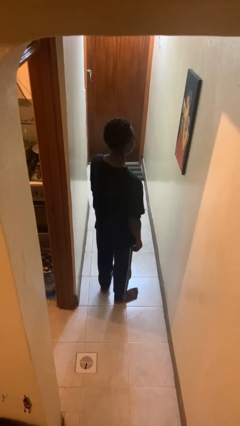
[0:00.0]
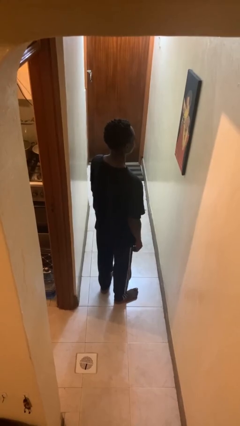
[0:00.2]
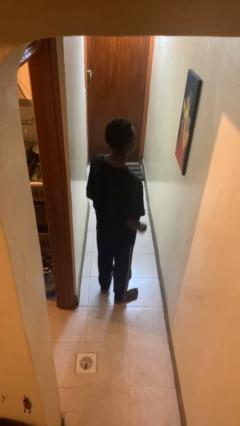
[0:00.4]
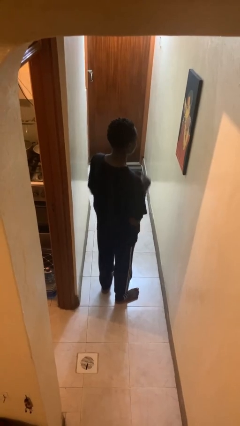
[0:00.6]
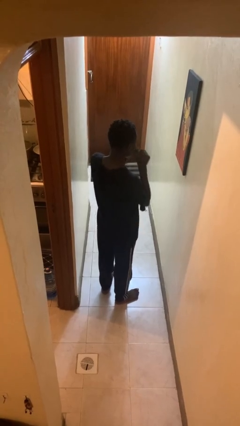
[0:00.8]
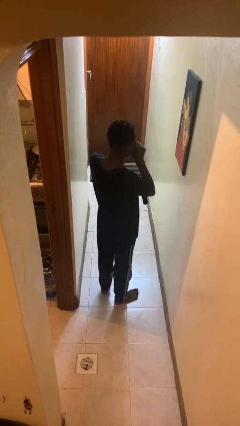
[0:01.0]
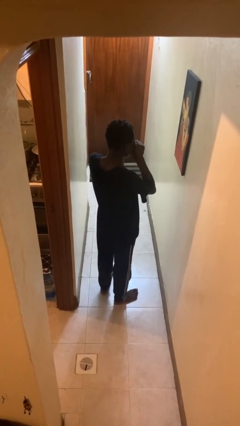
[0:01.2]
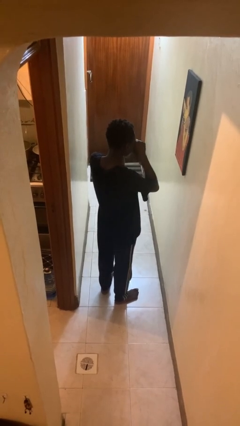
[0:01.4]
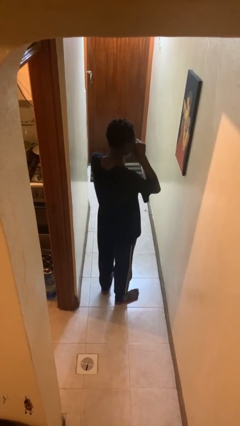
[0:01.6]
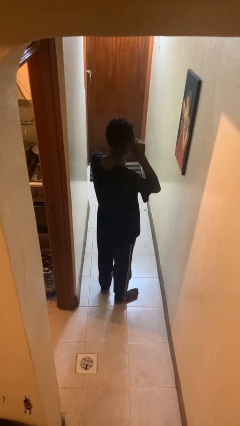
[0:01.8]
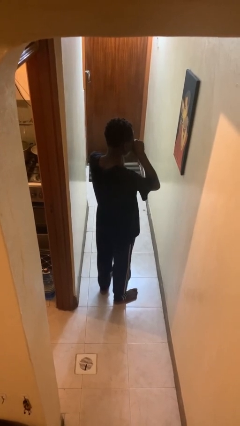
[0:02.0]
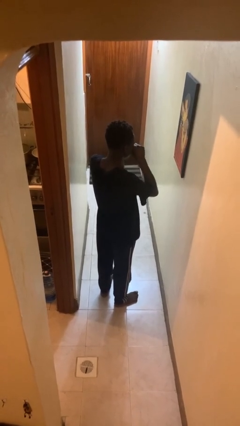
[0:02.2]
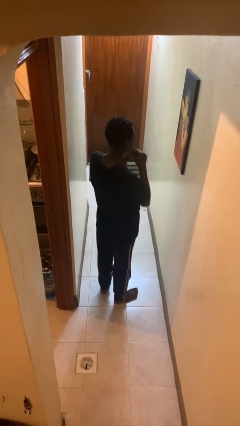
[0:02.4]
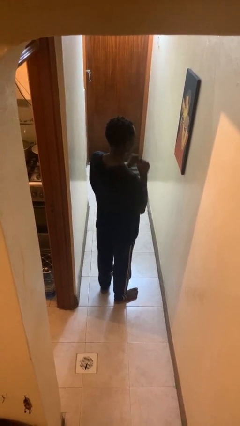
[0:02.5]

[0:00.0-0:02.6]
person rubs eyes

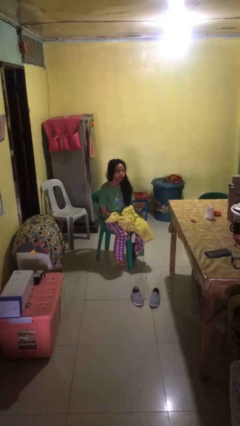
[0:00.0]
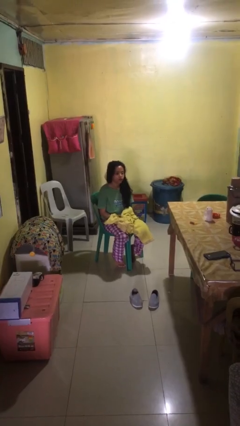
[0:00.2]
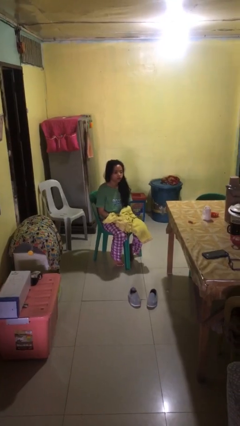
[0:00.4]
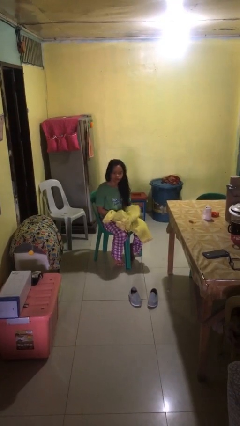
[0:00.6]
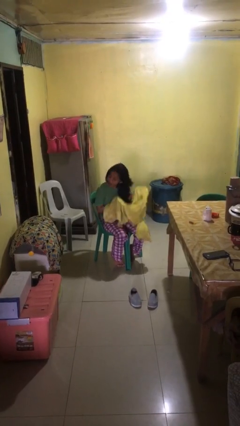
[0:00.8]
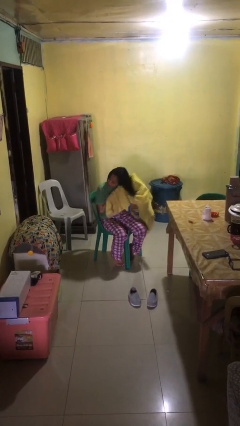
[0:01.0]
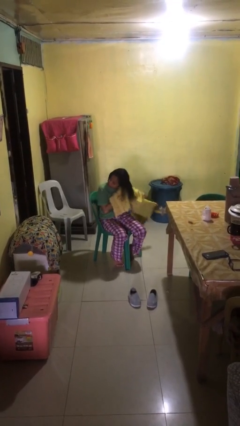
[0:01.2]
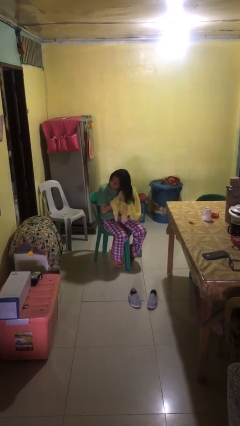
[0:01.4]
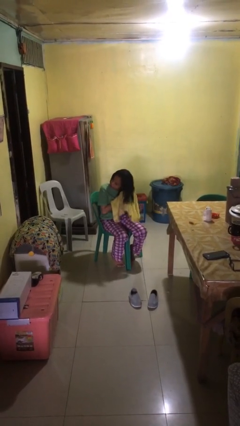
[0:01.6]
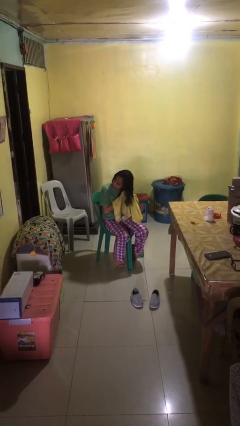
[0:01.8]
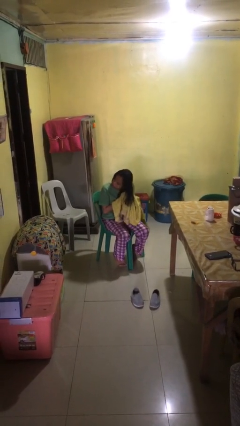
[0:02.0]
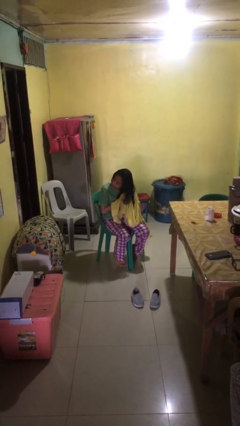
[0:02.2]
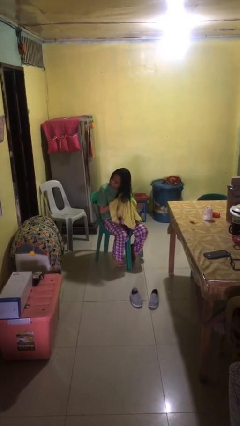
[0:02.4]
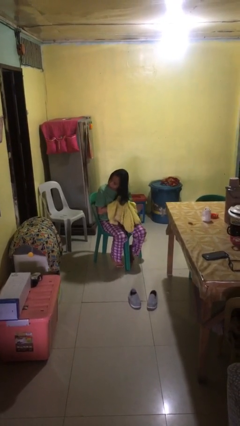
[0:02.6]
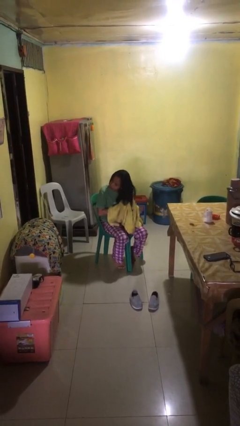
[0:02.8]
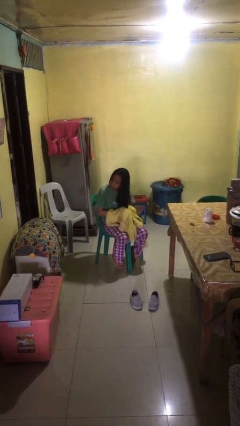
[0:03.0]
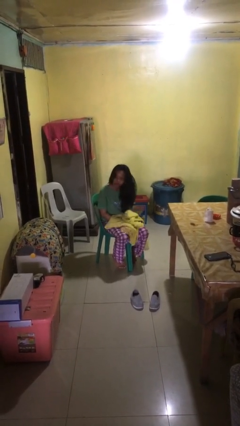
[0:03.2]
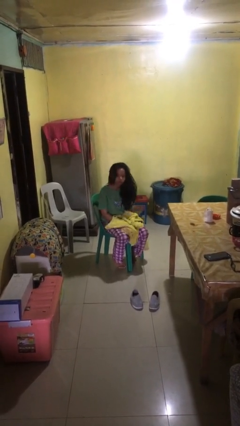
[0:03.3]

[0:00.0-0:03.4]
person dries hair with towel

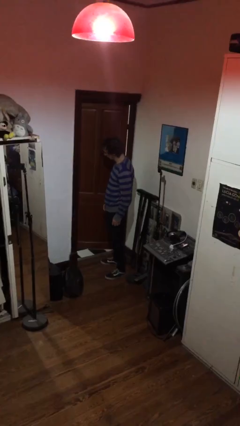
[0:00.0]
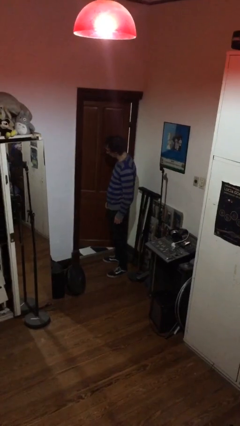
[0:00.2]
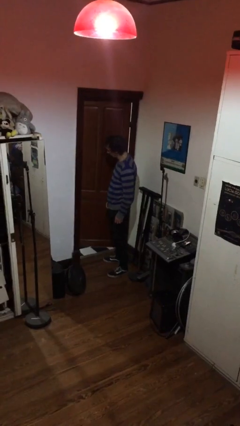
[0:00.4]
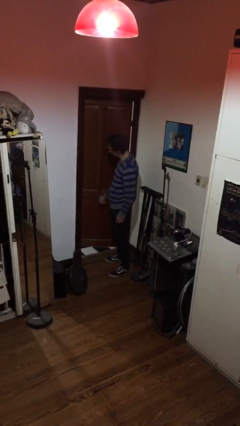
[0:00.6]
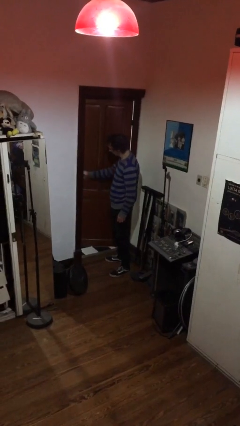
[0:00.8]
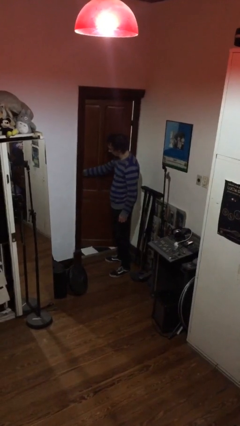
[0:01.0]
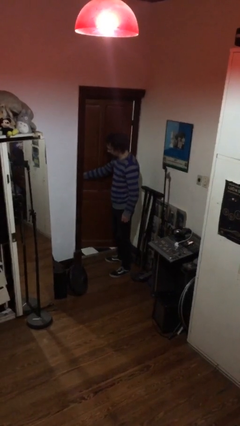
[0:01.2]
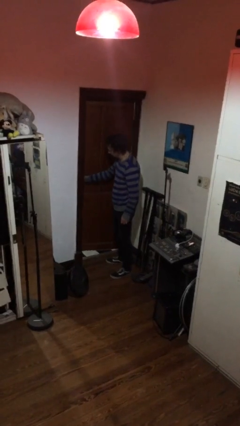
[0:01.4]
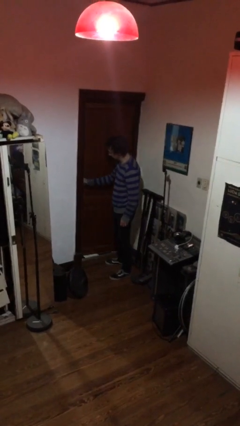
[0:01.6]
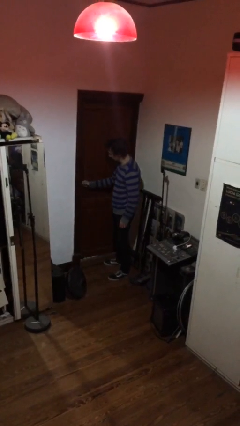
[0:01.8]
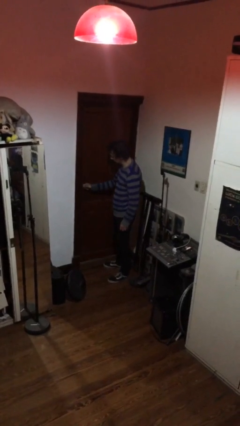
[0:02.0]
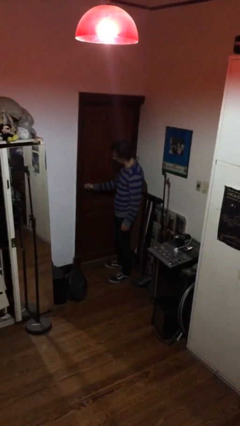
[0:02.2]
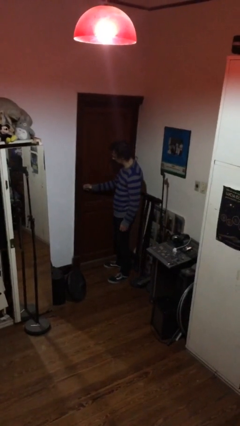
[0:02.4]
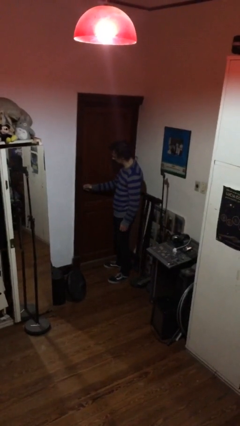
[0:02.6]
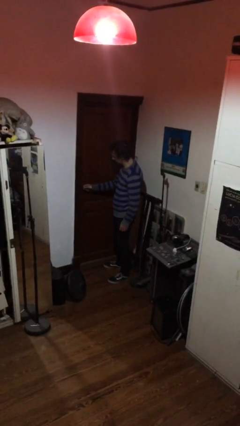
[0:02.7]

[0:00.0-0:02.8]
person closes facility door

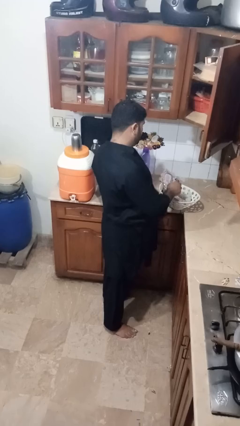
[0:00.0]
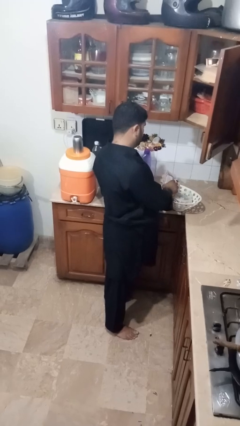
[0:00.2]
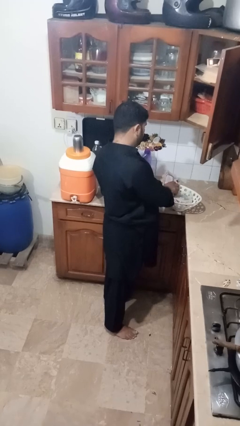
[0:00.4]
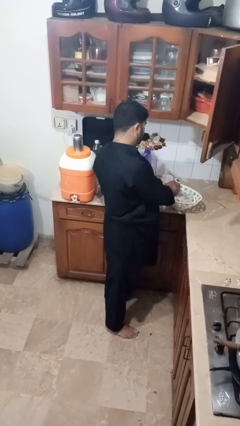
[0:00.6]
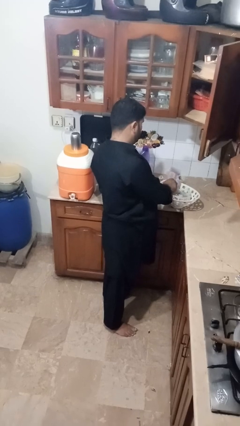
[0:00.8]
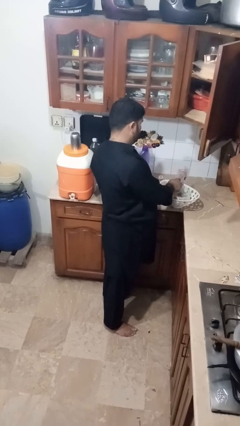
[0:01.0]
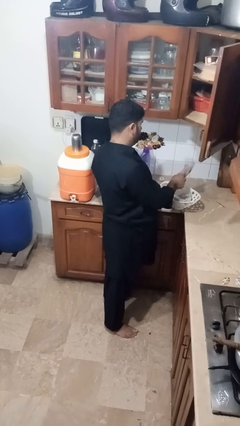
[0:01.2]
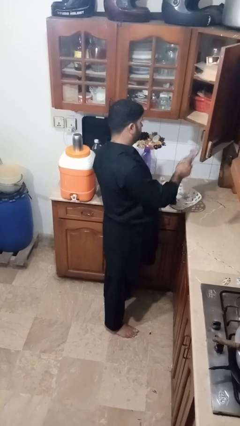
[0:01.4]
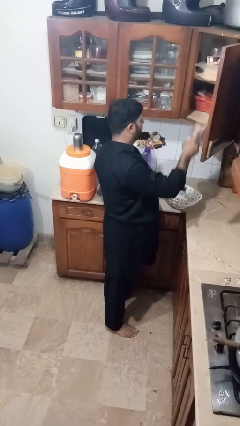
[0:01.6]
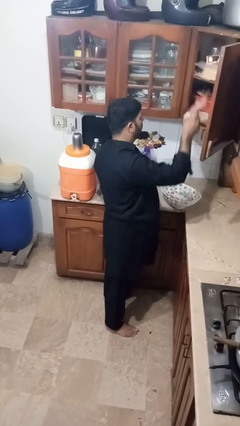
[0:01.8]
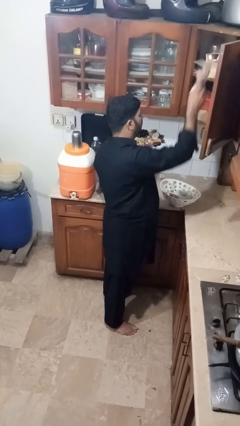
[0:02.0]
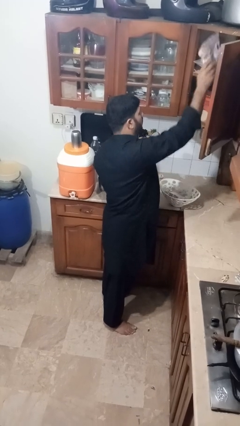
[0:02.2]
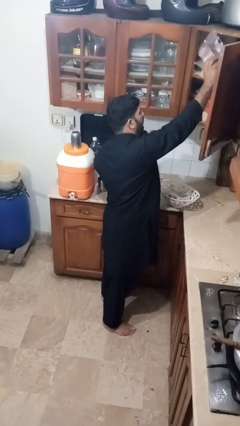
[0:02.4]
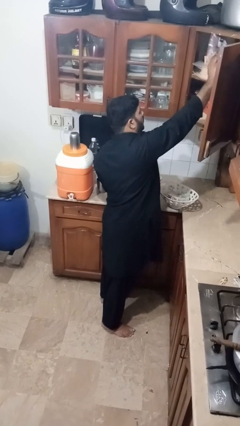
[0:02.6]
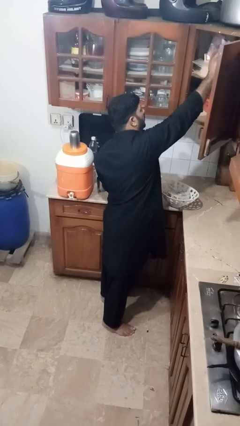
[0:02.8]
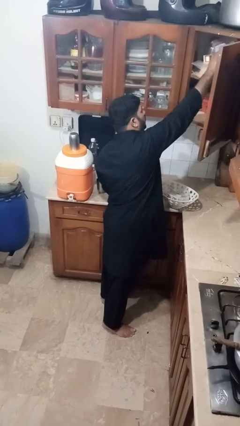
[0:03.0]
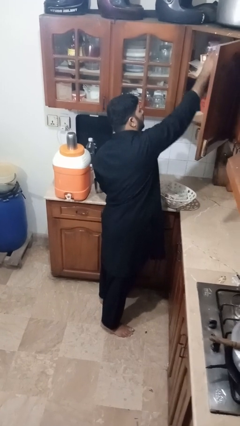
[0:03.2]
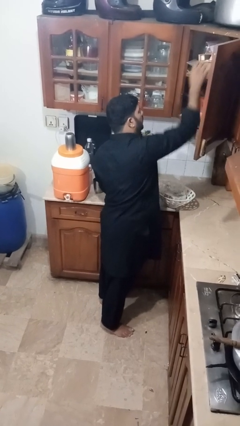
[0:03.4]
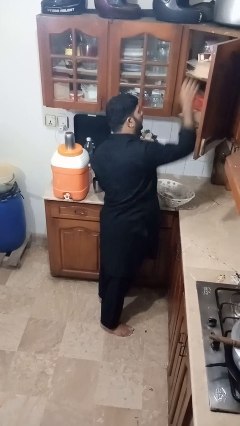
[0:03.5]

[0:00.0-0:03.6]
person loads groceries into cabinet

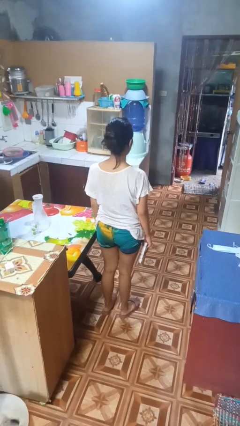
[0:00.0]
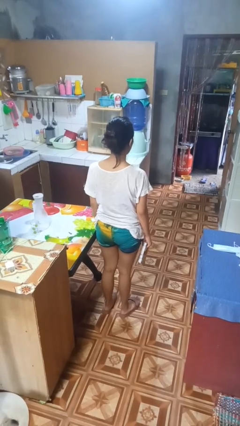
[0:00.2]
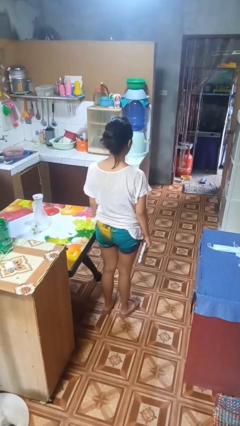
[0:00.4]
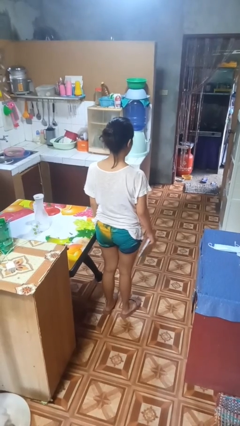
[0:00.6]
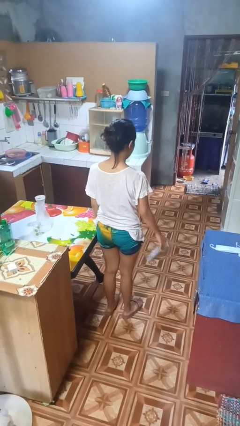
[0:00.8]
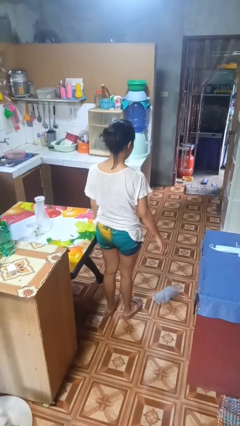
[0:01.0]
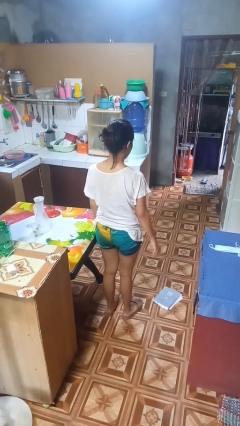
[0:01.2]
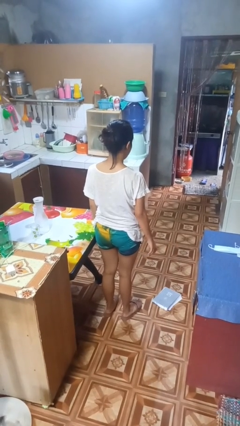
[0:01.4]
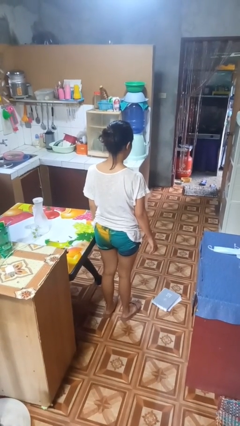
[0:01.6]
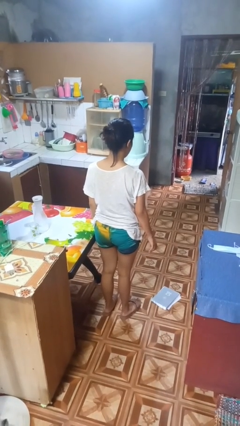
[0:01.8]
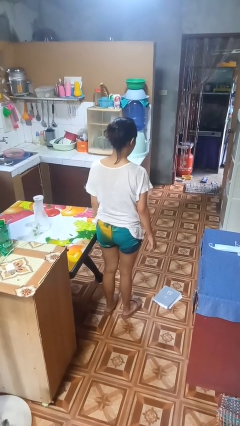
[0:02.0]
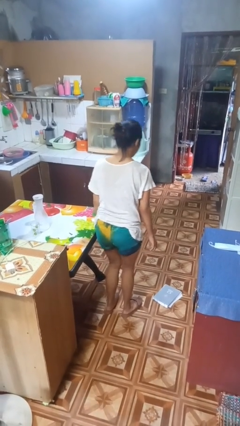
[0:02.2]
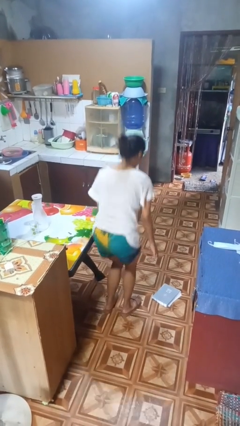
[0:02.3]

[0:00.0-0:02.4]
person drops object

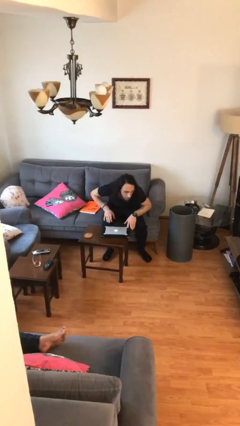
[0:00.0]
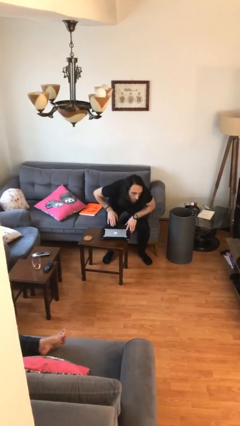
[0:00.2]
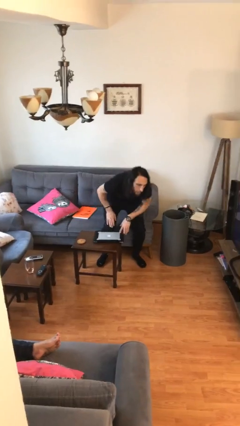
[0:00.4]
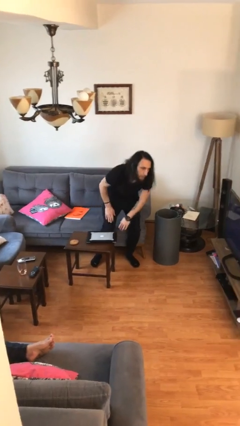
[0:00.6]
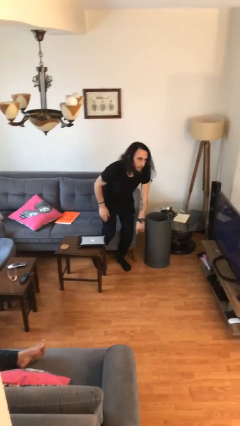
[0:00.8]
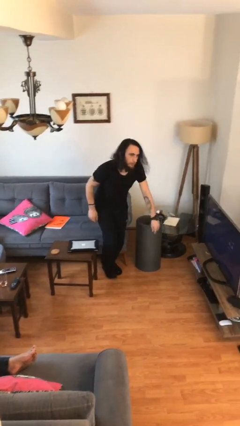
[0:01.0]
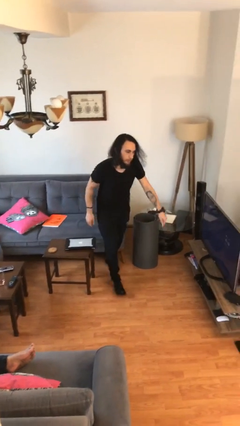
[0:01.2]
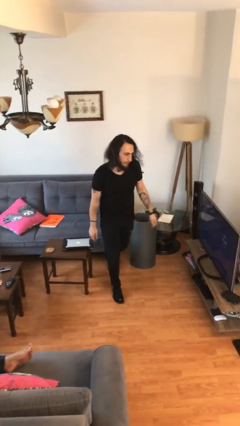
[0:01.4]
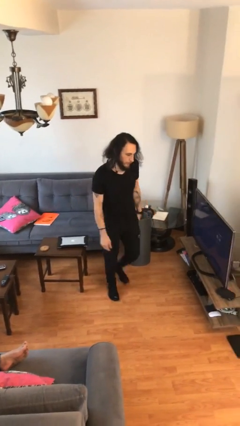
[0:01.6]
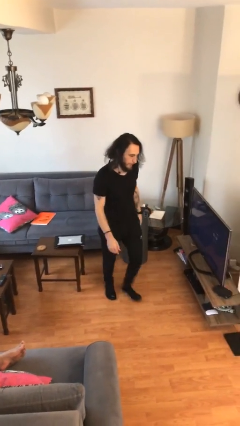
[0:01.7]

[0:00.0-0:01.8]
person stands up

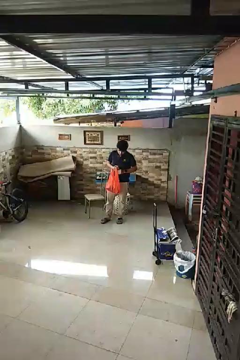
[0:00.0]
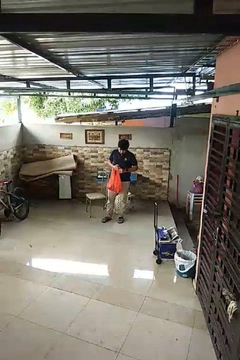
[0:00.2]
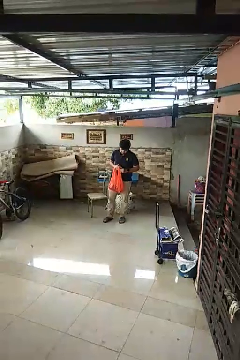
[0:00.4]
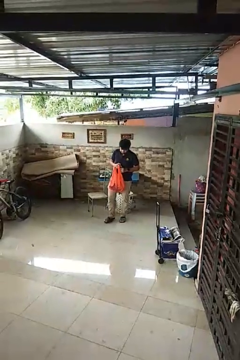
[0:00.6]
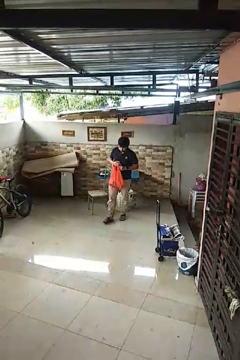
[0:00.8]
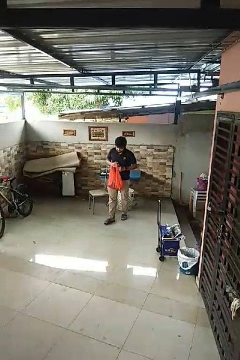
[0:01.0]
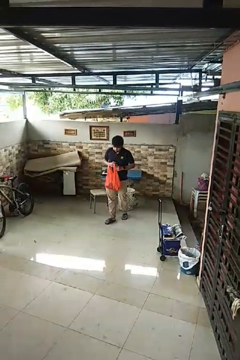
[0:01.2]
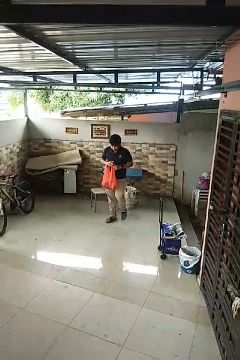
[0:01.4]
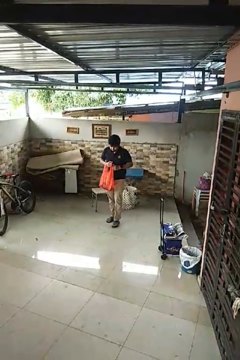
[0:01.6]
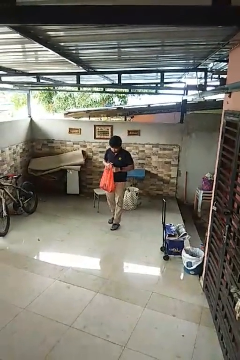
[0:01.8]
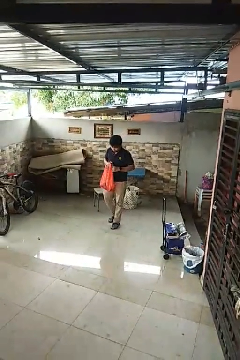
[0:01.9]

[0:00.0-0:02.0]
person carries groceries
